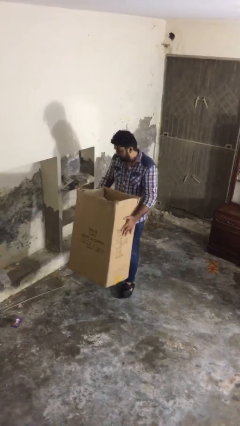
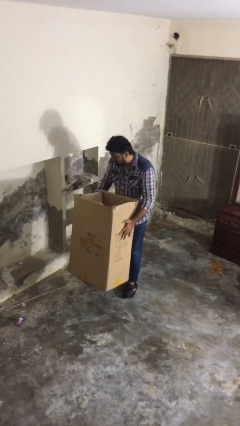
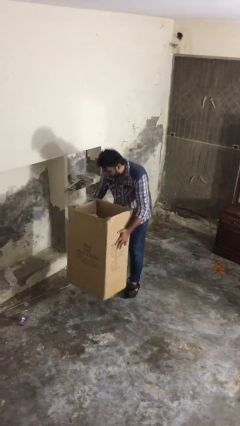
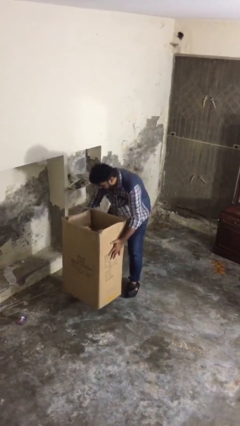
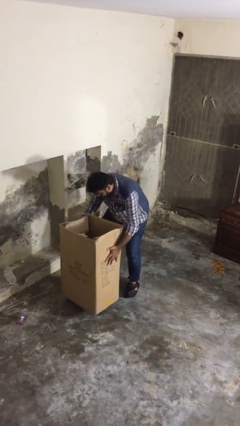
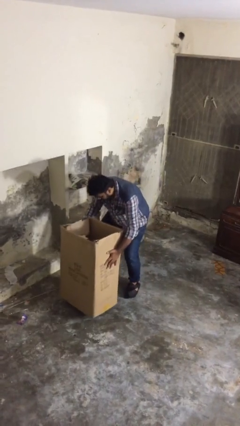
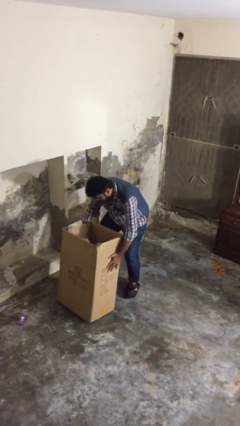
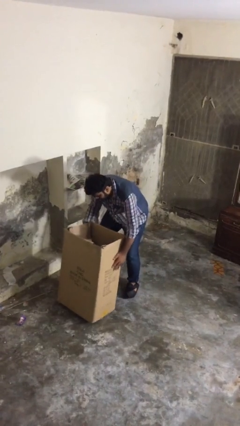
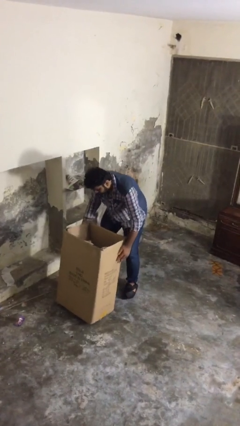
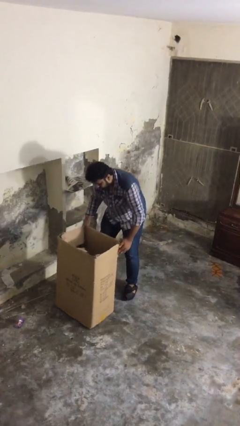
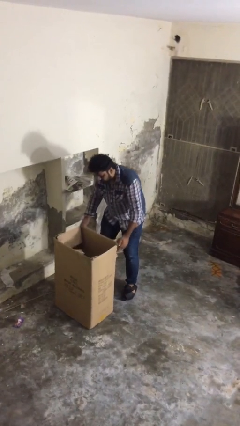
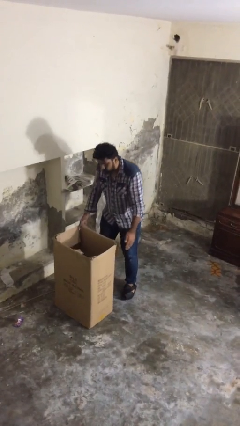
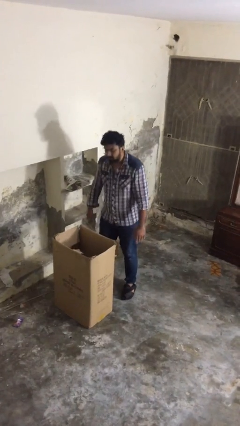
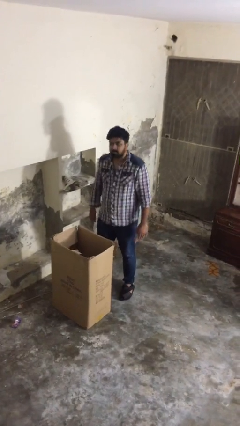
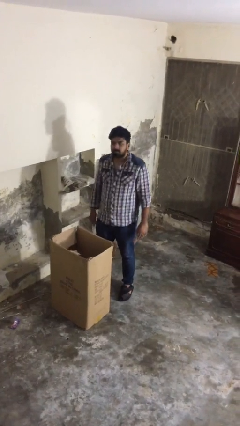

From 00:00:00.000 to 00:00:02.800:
person puts down object on floor

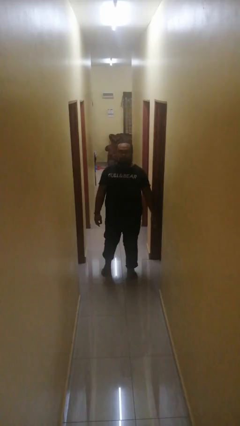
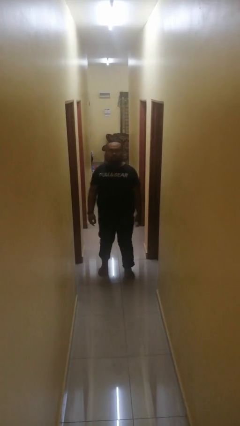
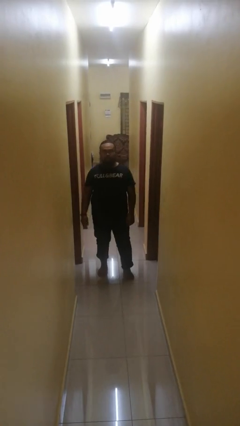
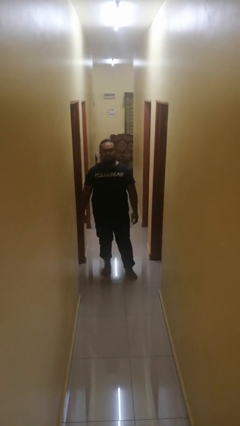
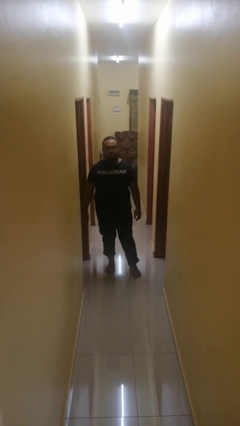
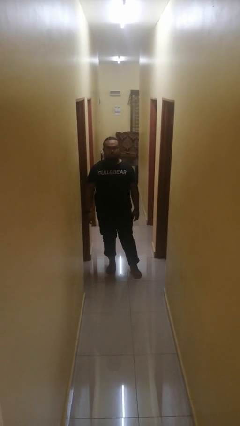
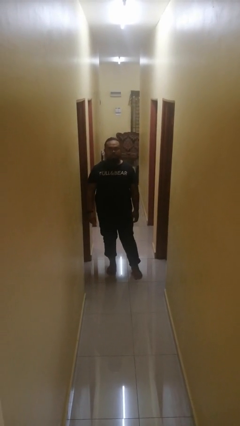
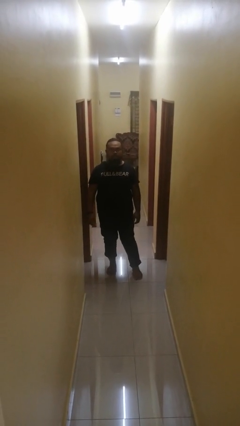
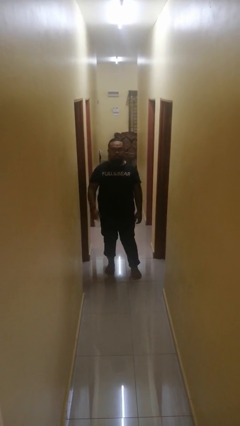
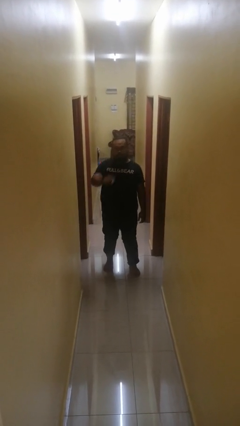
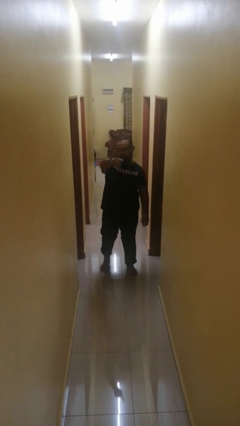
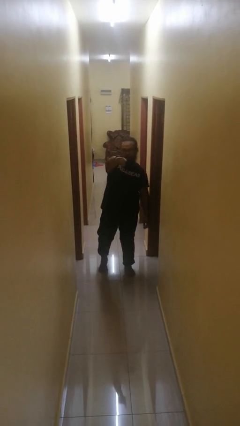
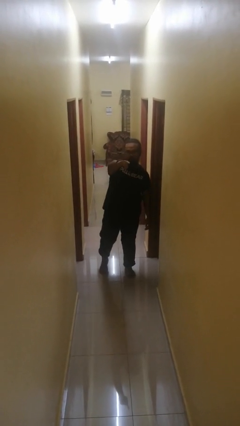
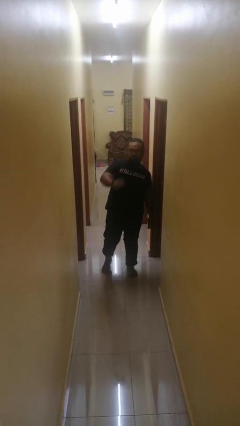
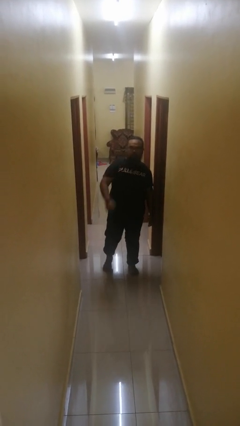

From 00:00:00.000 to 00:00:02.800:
person points at person

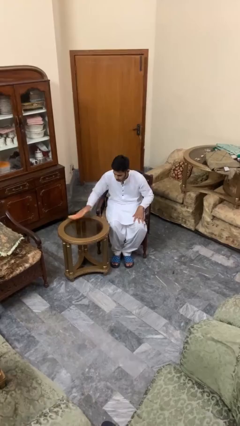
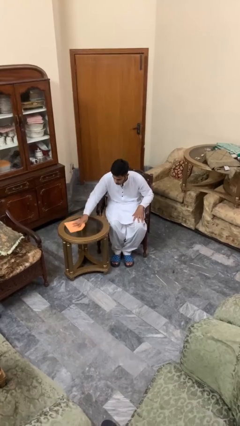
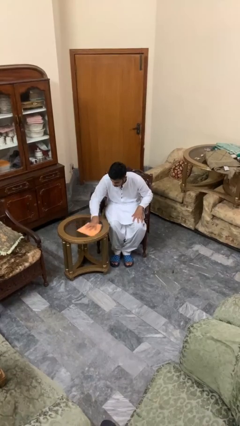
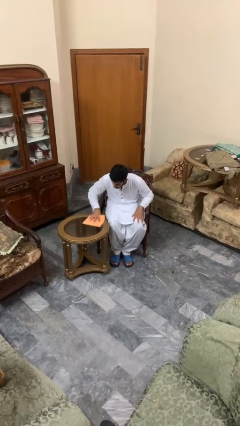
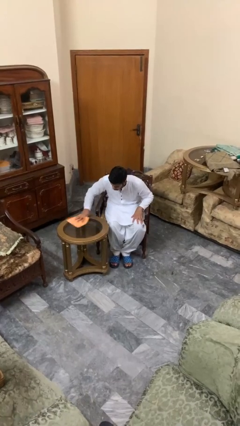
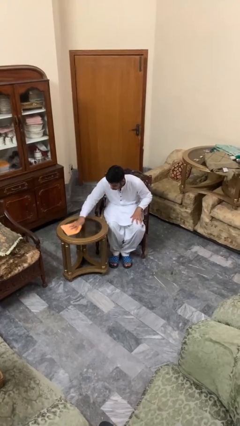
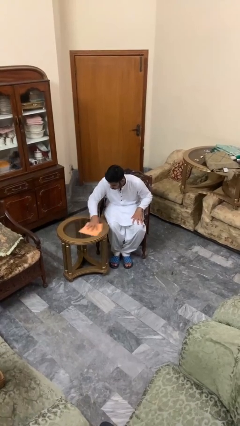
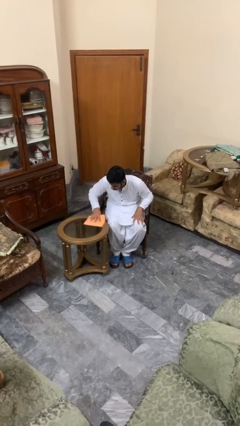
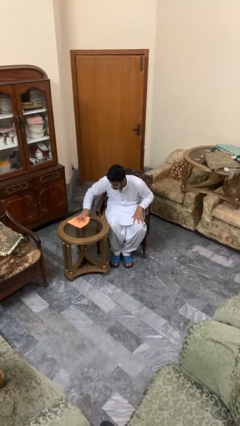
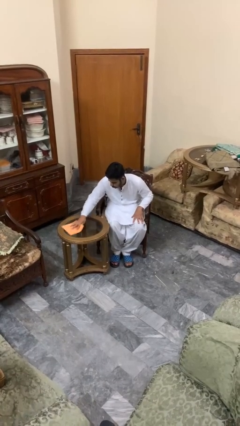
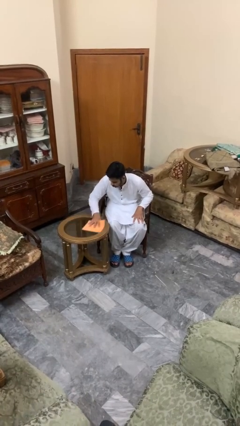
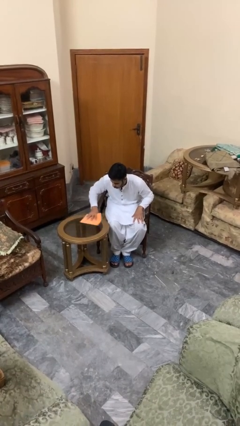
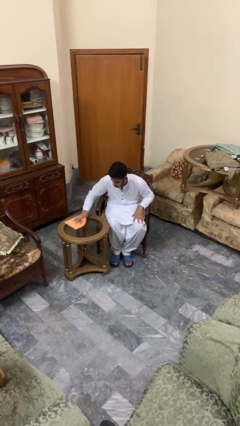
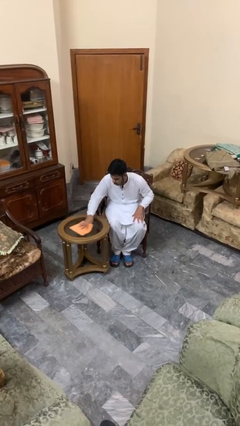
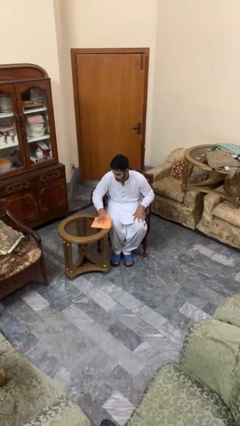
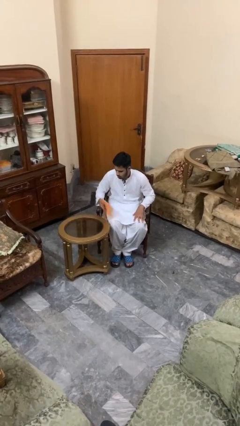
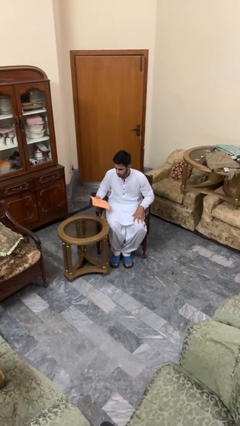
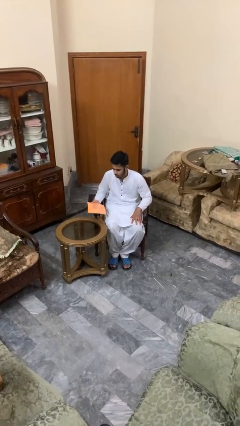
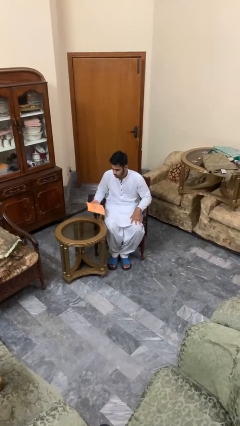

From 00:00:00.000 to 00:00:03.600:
person cleans table with rag

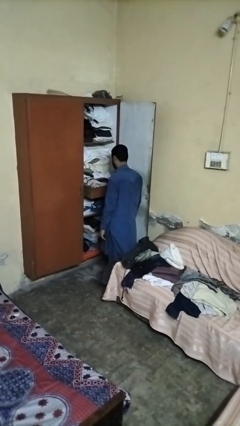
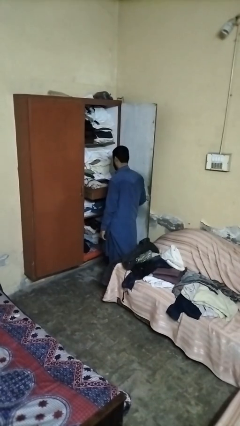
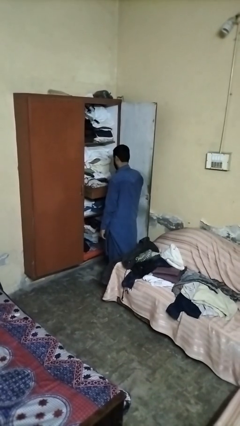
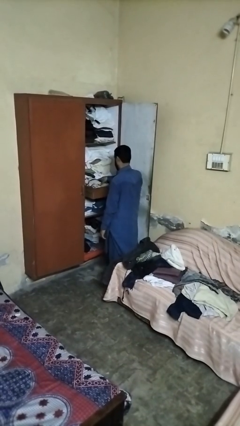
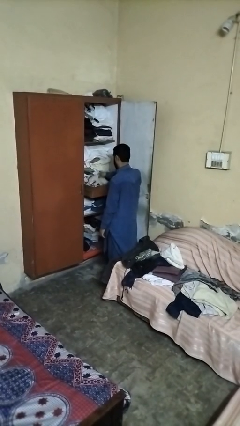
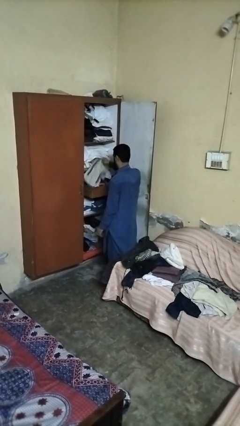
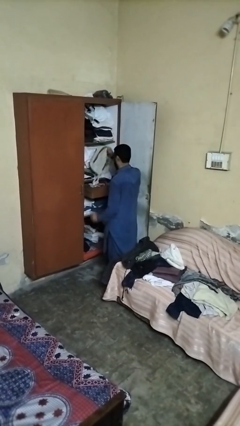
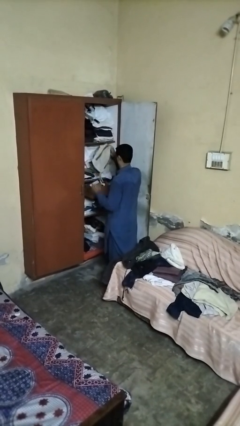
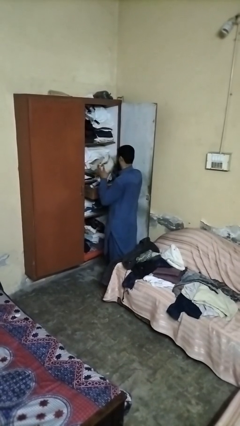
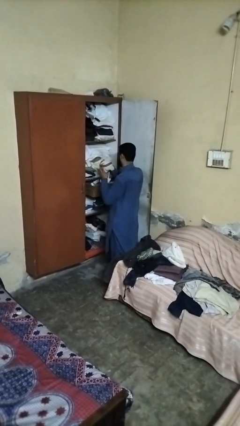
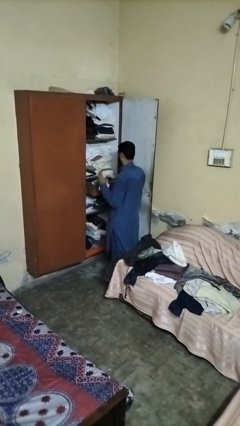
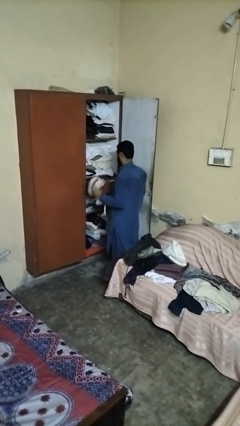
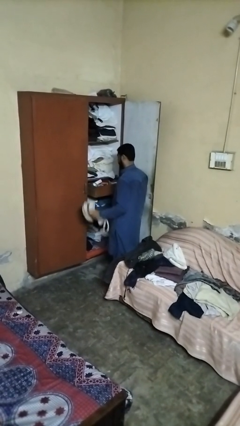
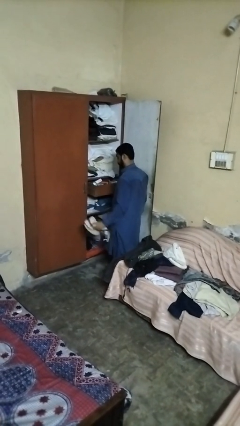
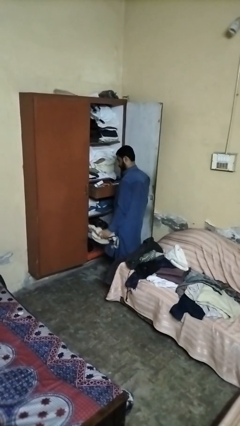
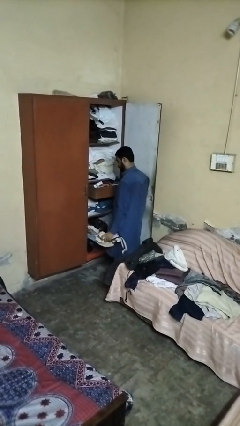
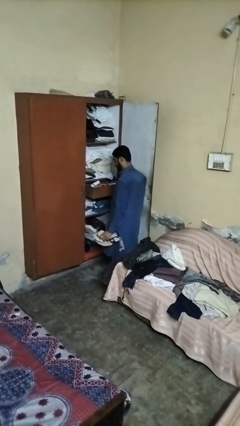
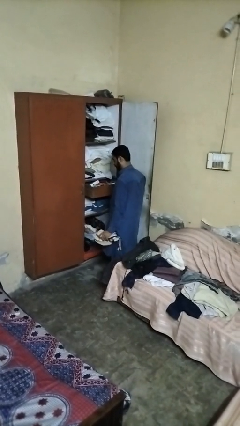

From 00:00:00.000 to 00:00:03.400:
person takes clothes from dresser

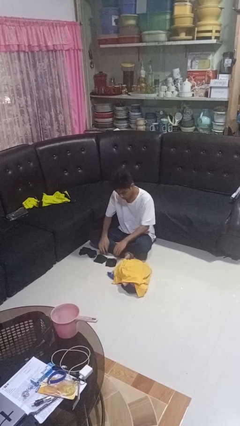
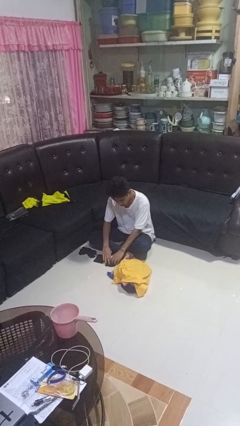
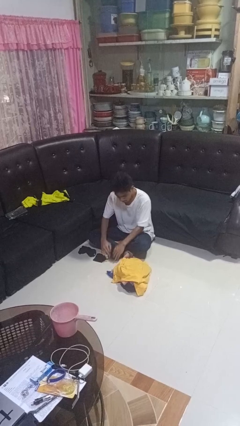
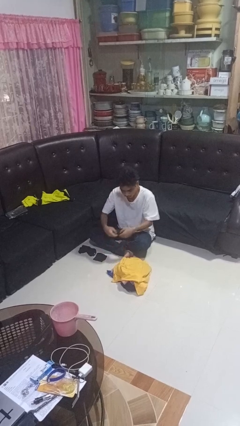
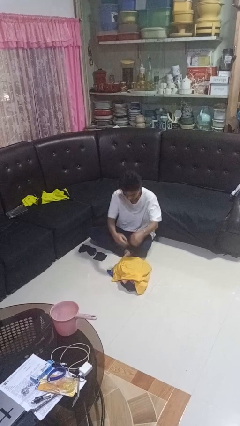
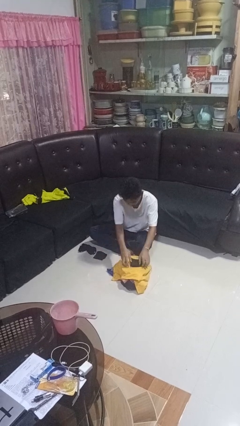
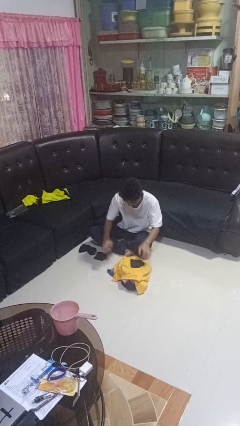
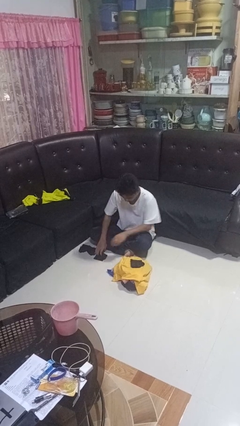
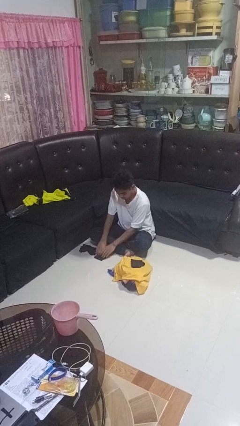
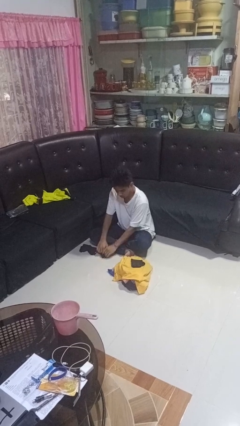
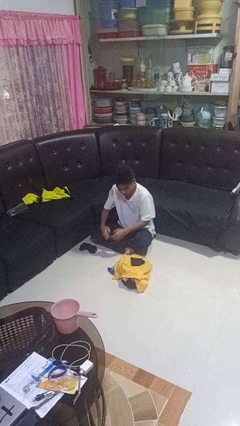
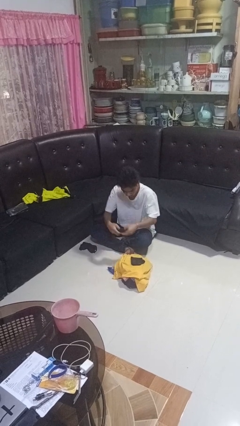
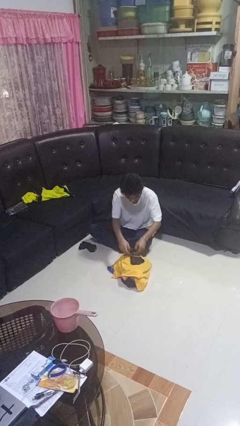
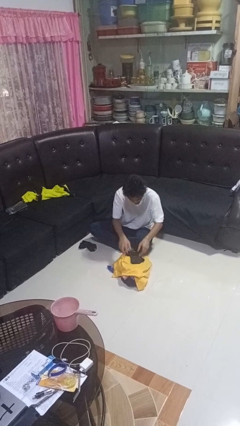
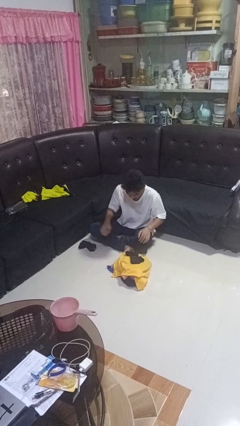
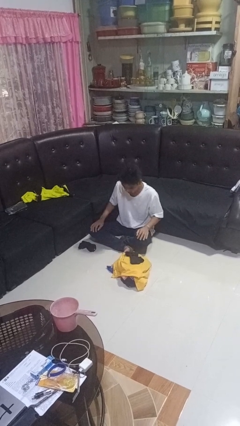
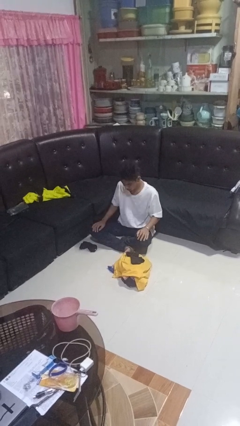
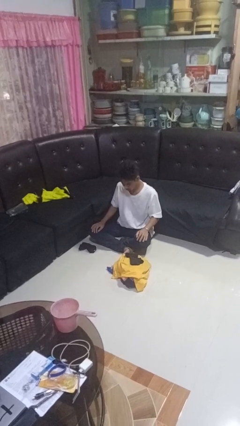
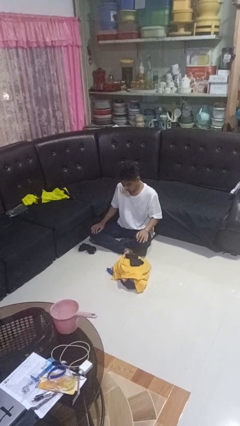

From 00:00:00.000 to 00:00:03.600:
person folds socks

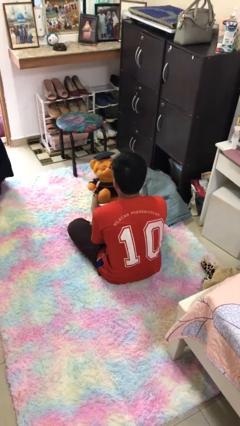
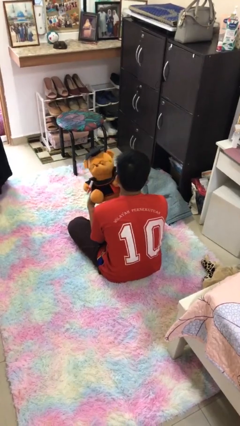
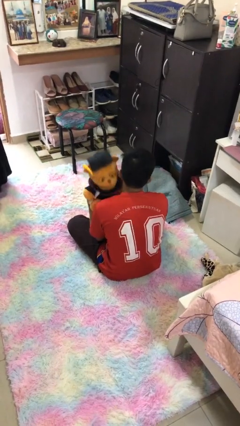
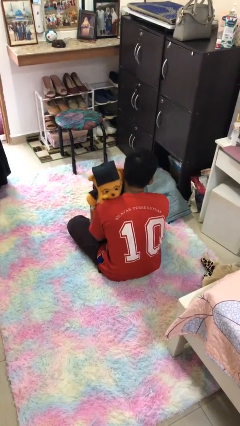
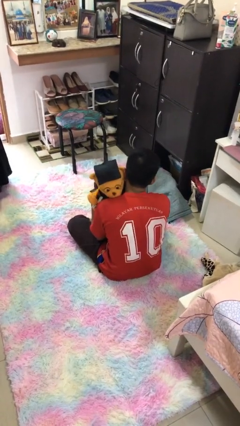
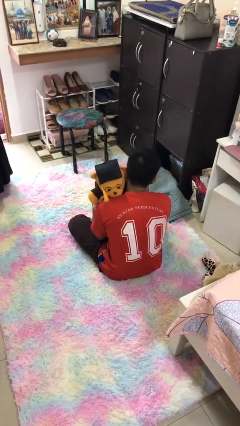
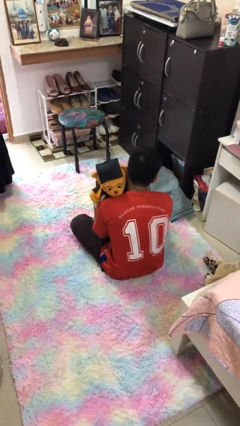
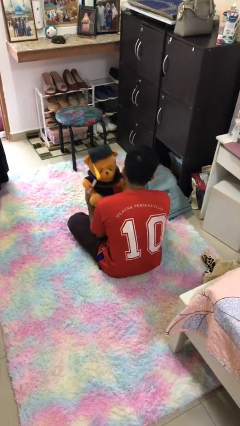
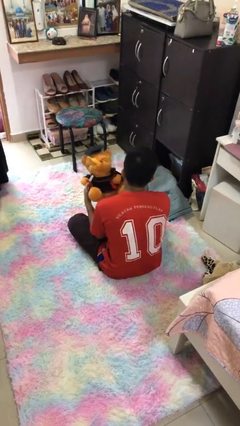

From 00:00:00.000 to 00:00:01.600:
person hugs stuffed animal
